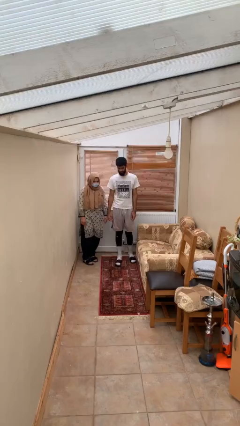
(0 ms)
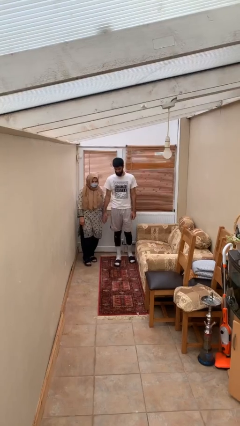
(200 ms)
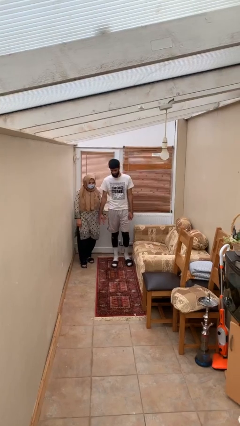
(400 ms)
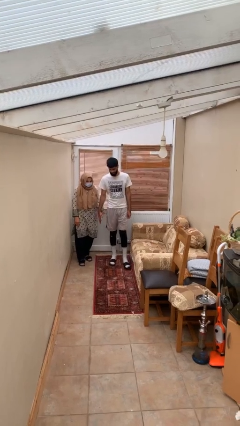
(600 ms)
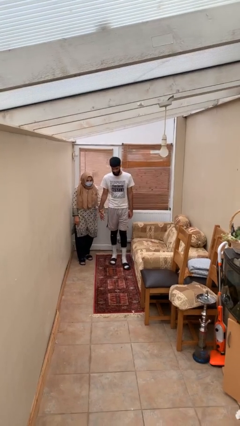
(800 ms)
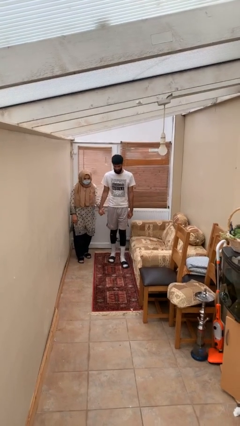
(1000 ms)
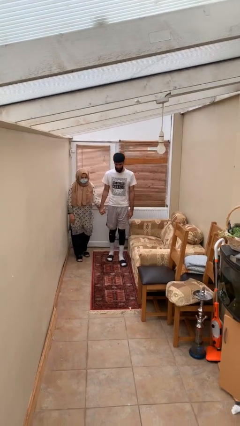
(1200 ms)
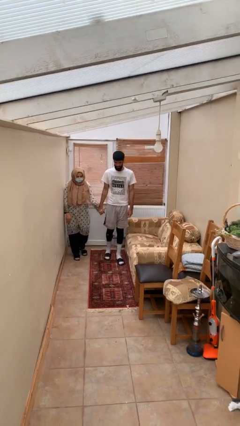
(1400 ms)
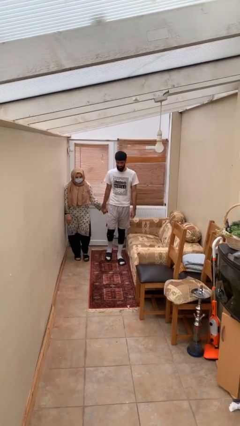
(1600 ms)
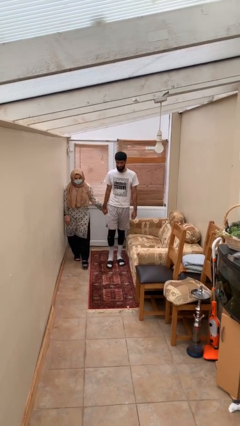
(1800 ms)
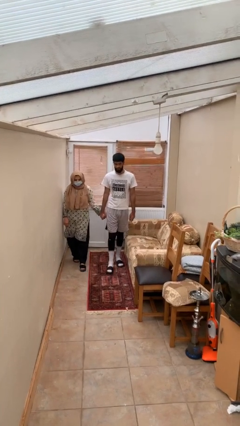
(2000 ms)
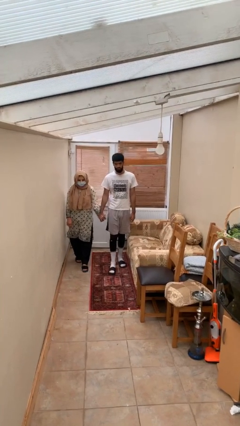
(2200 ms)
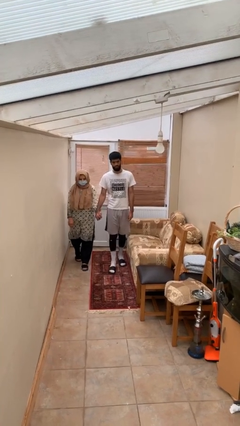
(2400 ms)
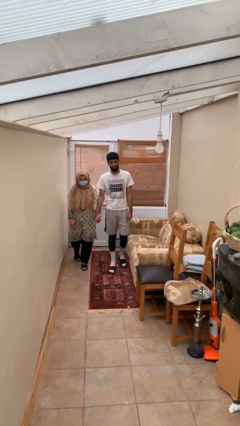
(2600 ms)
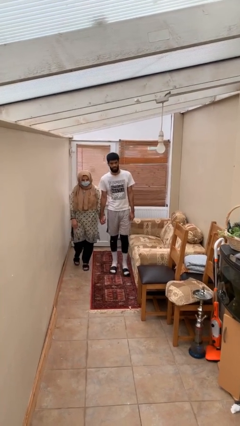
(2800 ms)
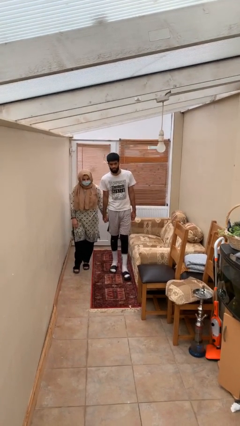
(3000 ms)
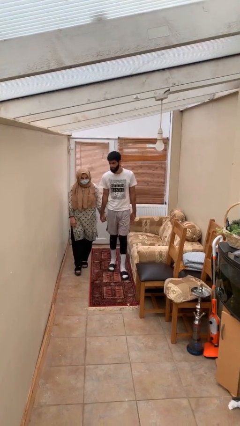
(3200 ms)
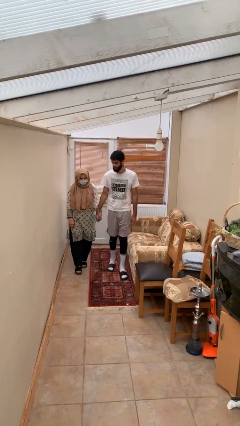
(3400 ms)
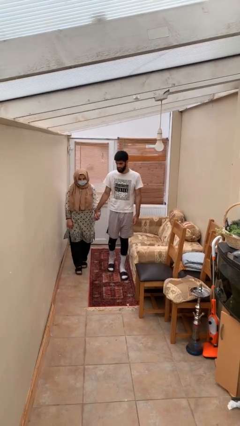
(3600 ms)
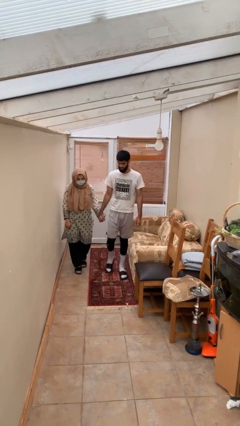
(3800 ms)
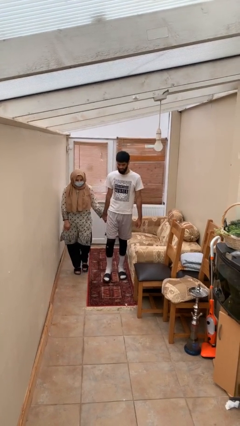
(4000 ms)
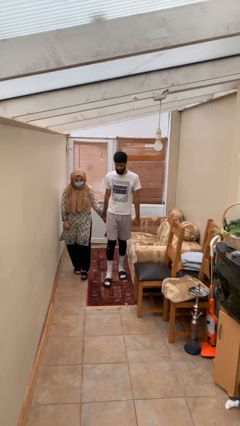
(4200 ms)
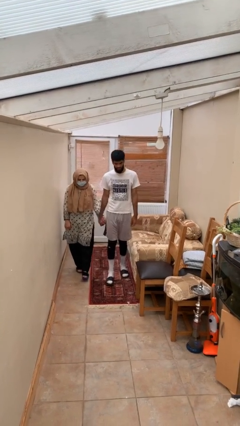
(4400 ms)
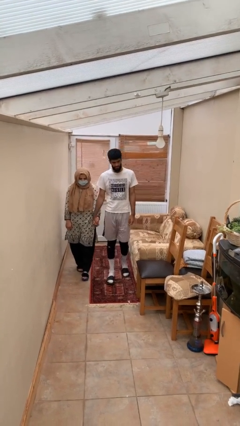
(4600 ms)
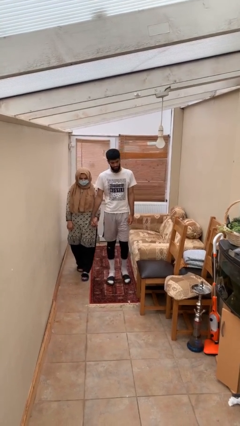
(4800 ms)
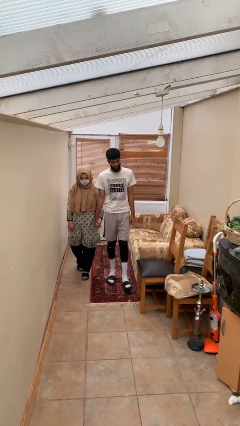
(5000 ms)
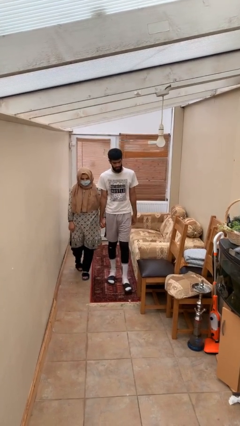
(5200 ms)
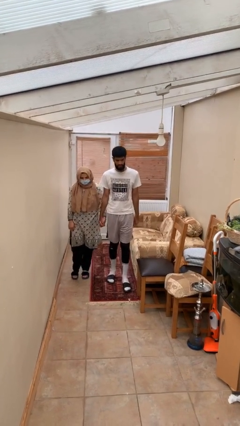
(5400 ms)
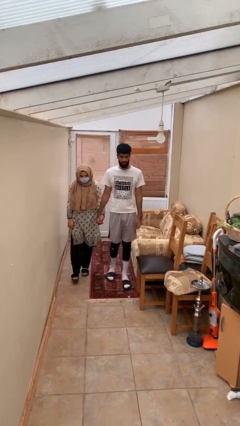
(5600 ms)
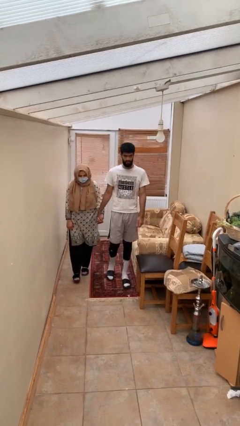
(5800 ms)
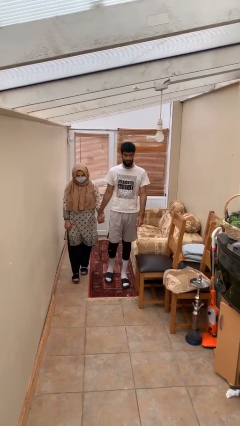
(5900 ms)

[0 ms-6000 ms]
person holds hand

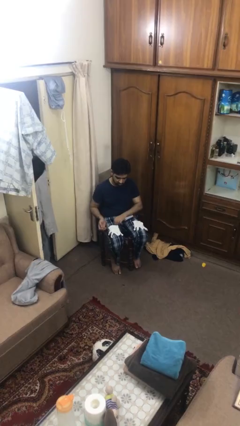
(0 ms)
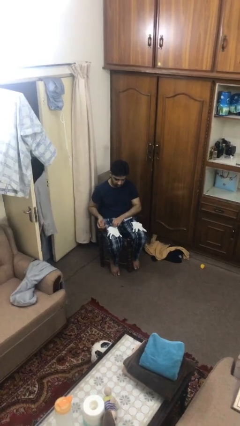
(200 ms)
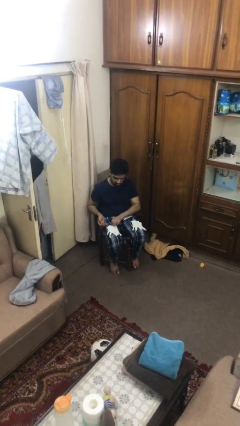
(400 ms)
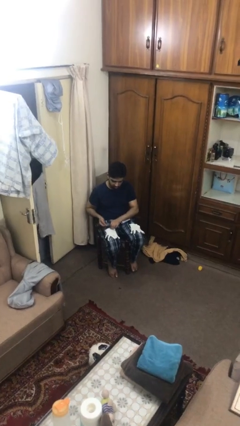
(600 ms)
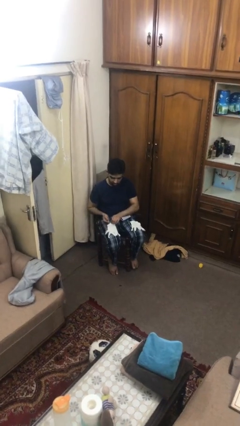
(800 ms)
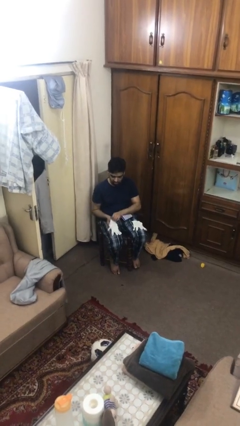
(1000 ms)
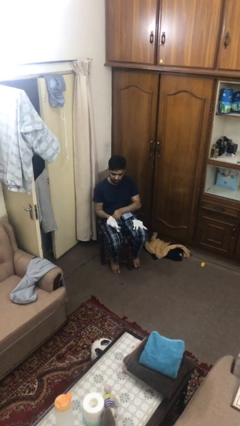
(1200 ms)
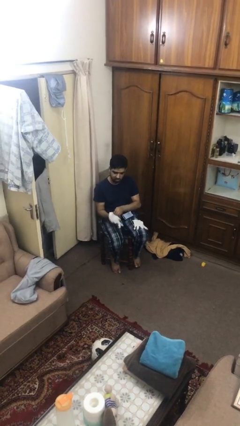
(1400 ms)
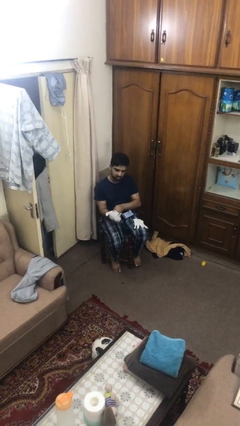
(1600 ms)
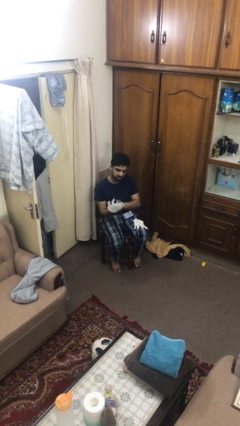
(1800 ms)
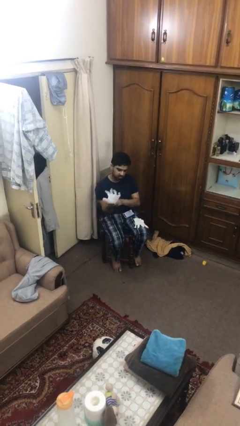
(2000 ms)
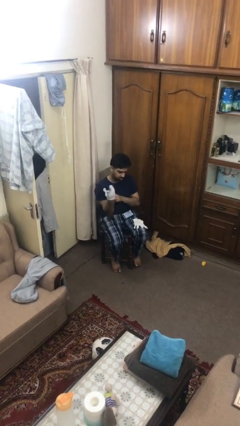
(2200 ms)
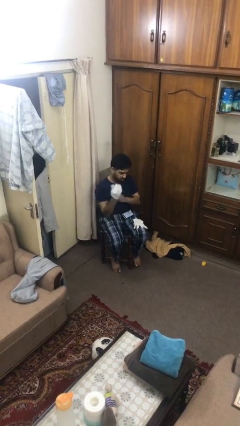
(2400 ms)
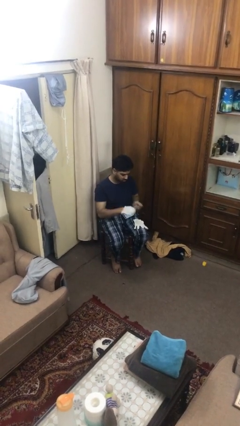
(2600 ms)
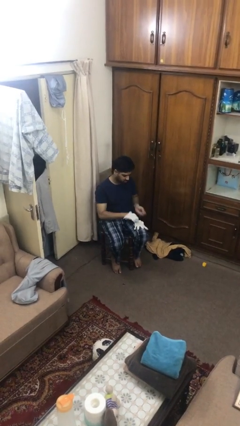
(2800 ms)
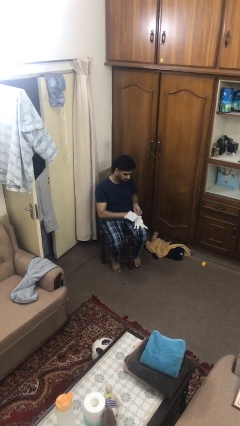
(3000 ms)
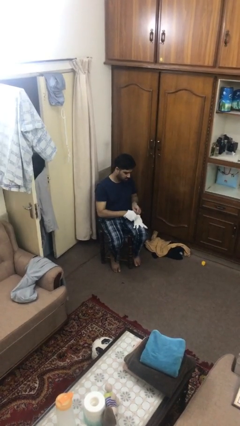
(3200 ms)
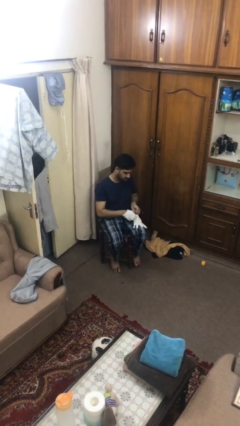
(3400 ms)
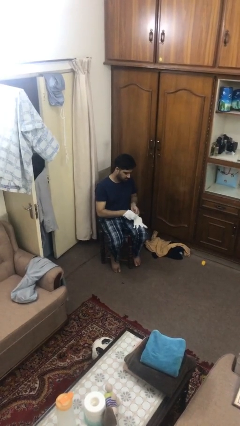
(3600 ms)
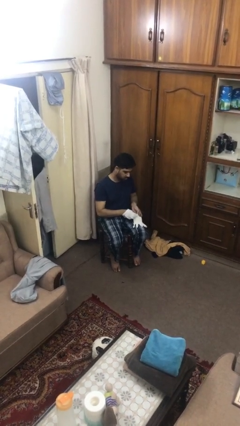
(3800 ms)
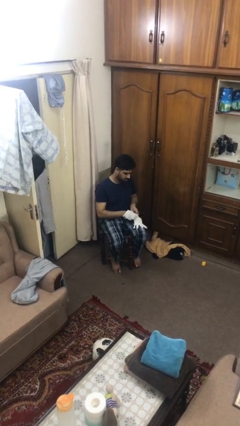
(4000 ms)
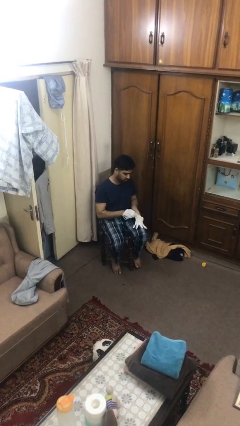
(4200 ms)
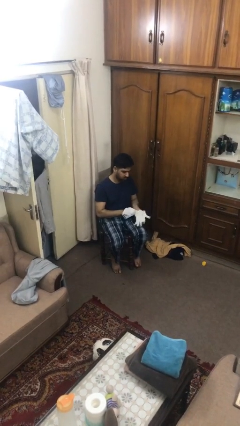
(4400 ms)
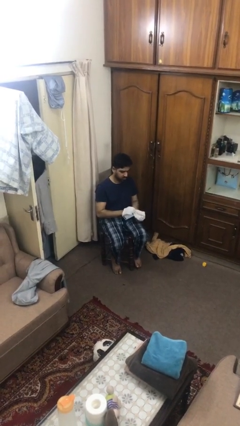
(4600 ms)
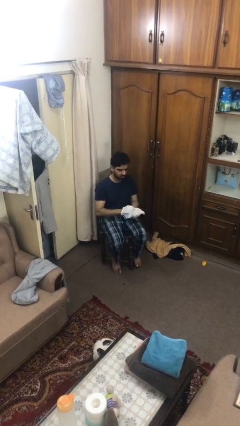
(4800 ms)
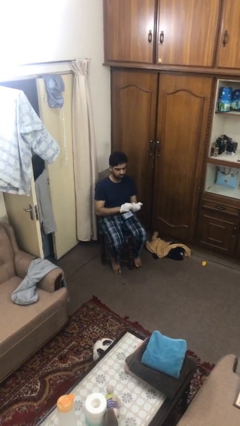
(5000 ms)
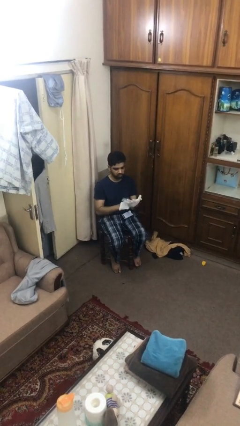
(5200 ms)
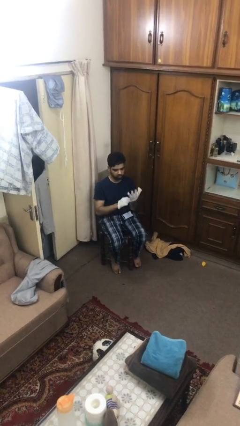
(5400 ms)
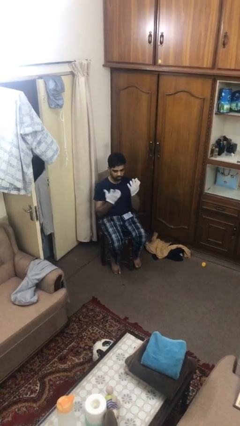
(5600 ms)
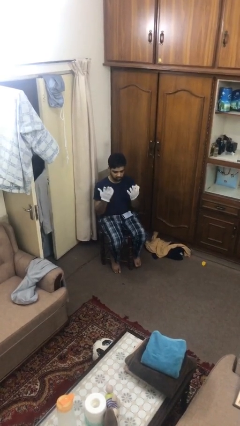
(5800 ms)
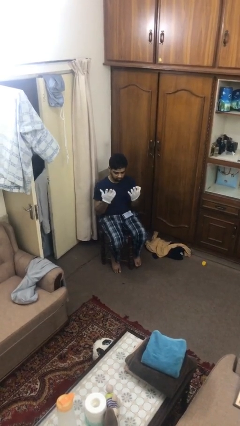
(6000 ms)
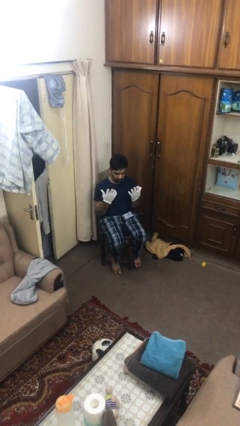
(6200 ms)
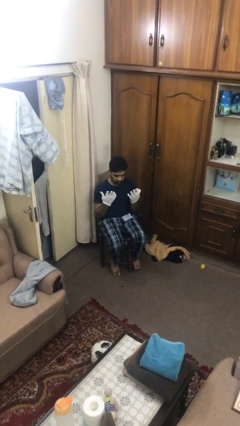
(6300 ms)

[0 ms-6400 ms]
person puts on gloves

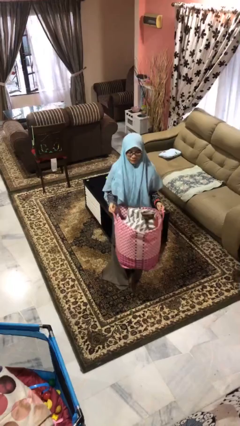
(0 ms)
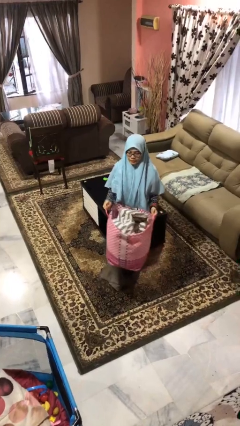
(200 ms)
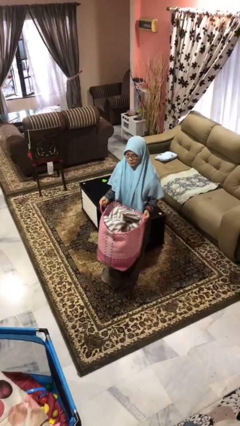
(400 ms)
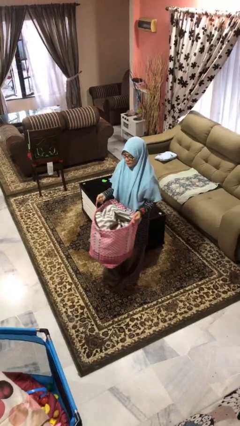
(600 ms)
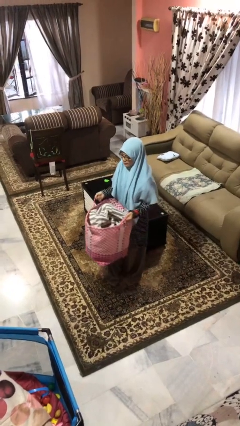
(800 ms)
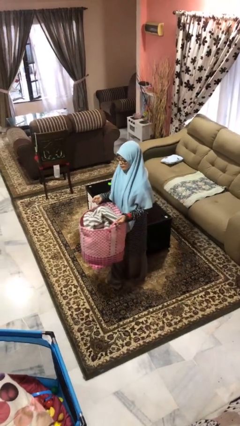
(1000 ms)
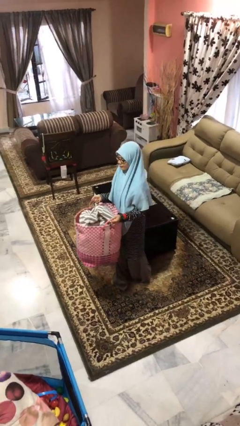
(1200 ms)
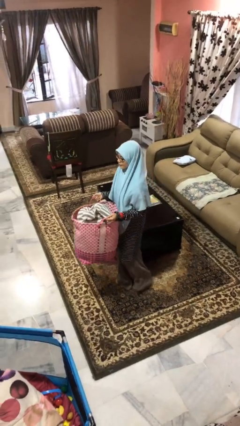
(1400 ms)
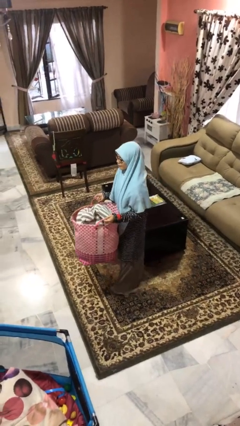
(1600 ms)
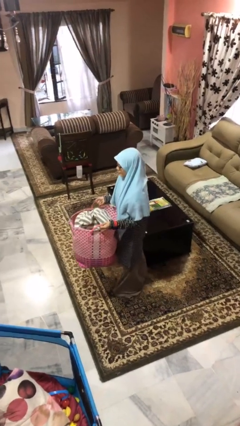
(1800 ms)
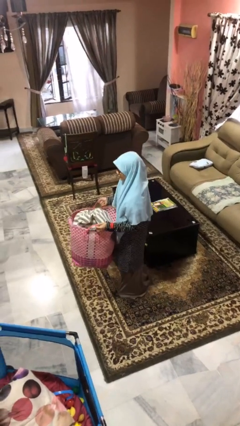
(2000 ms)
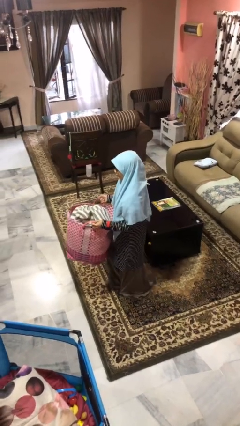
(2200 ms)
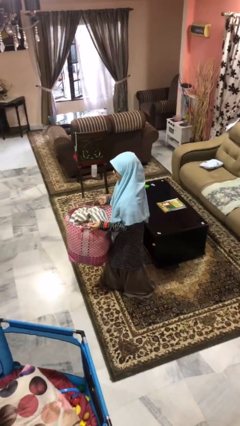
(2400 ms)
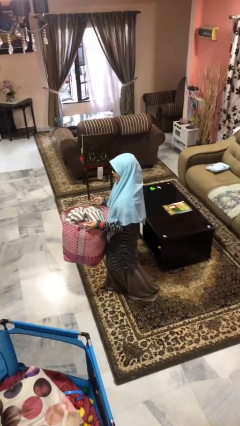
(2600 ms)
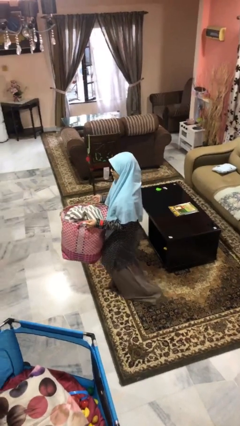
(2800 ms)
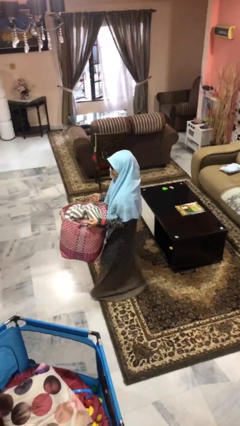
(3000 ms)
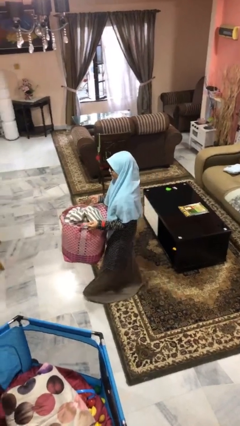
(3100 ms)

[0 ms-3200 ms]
person carries laundry basket

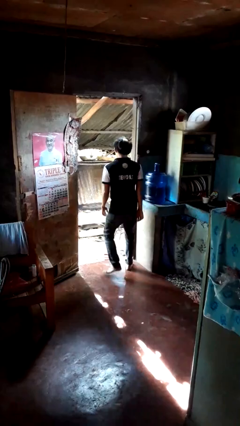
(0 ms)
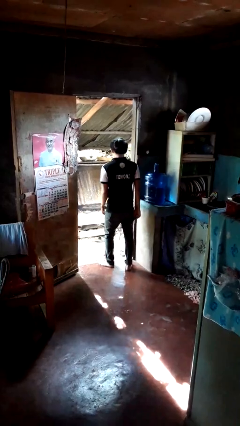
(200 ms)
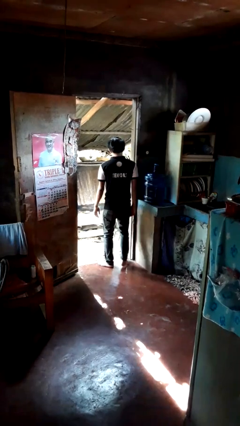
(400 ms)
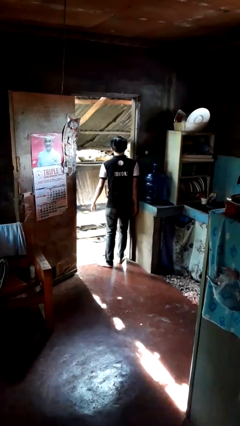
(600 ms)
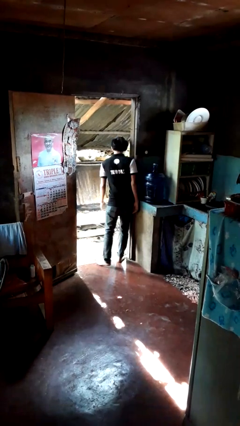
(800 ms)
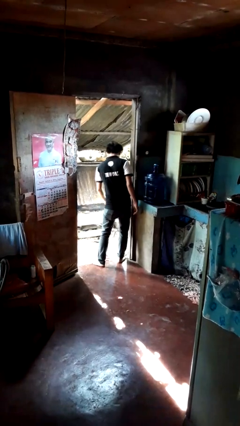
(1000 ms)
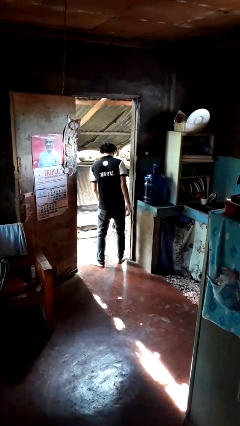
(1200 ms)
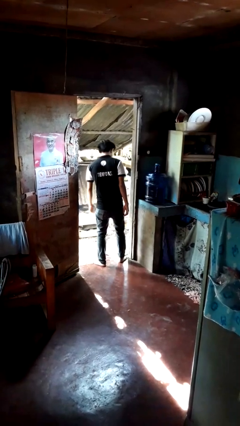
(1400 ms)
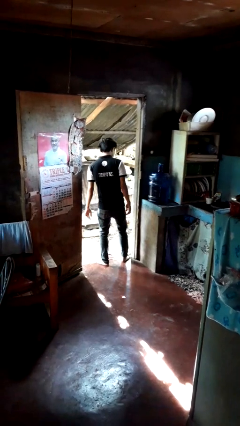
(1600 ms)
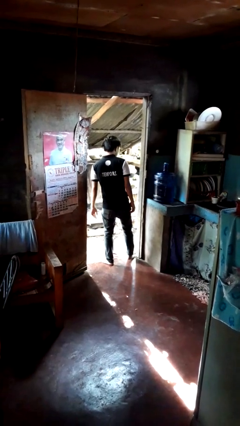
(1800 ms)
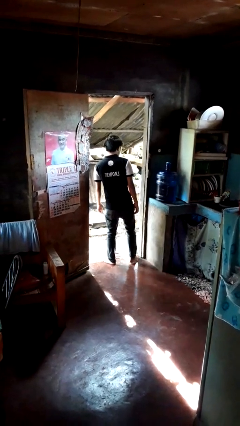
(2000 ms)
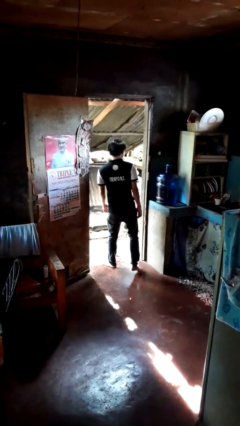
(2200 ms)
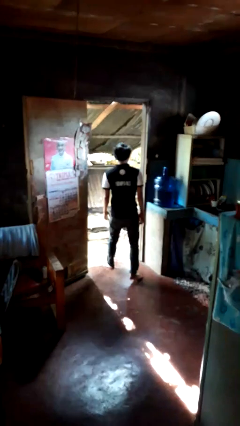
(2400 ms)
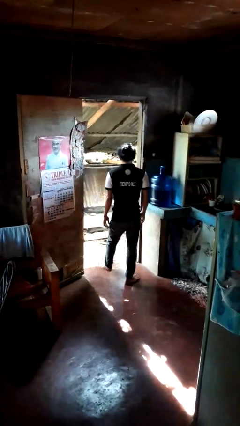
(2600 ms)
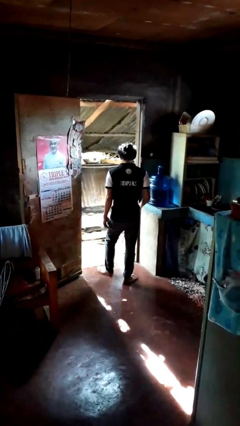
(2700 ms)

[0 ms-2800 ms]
person bumps into wall
